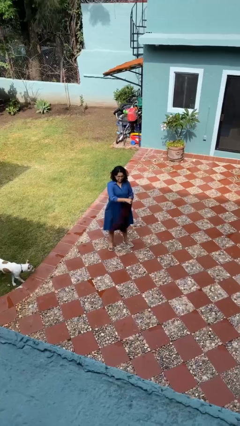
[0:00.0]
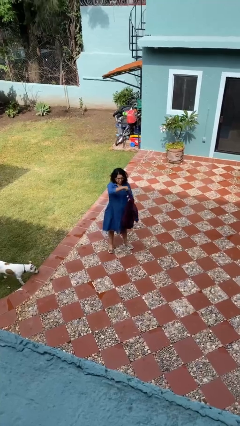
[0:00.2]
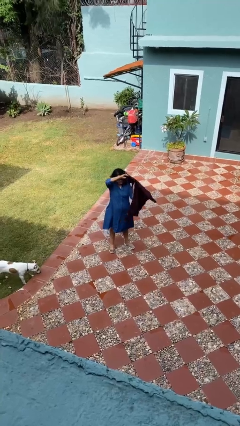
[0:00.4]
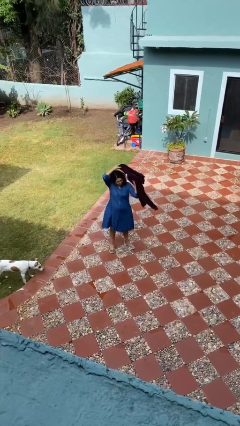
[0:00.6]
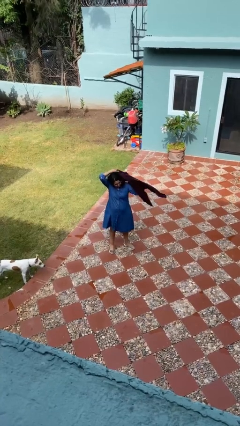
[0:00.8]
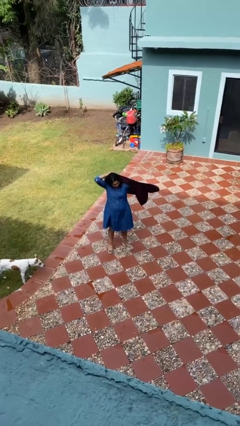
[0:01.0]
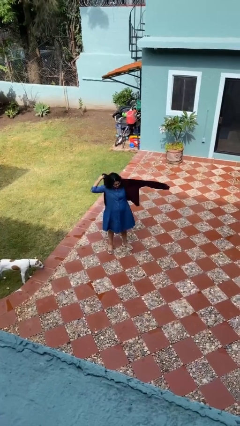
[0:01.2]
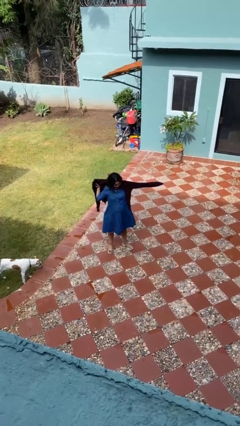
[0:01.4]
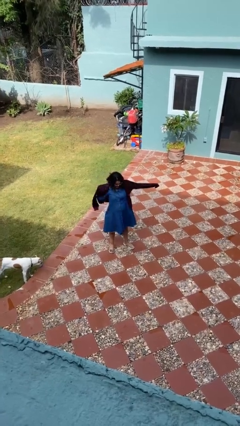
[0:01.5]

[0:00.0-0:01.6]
person puts on jacket

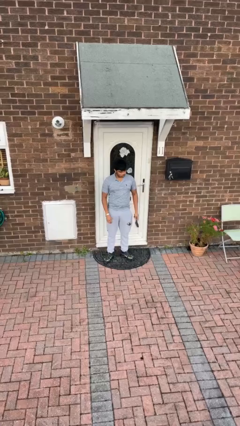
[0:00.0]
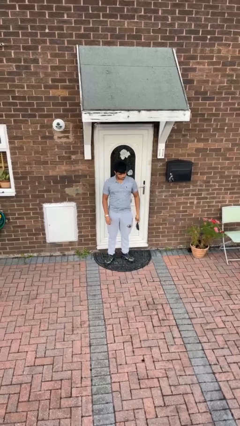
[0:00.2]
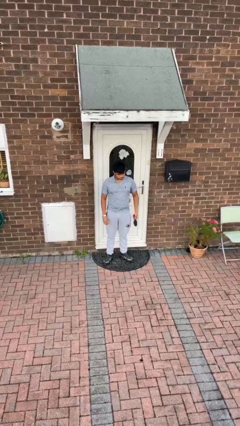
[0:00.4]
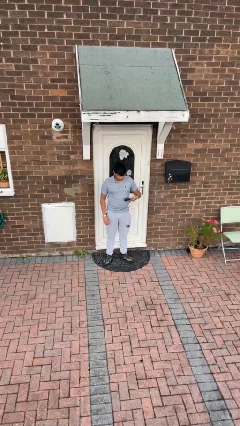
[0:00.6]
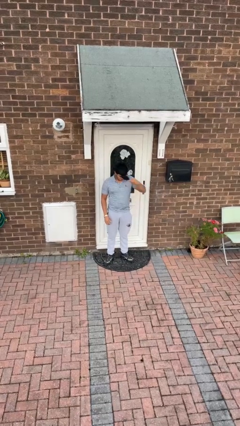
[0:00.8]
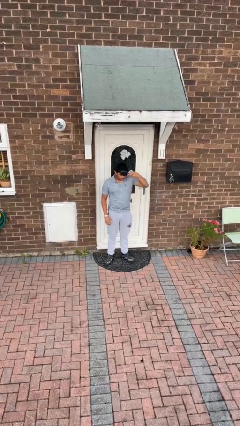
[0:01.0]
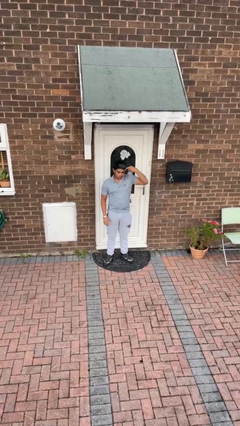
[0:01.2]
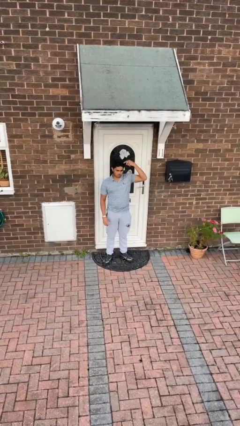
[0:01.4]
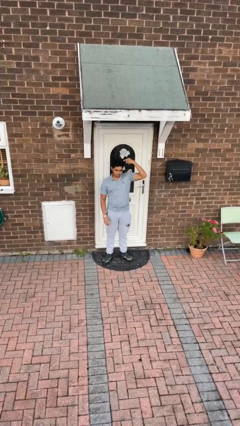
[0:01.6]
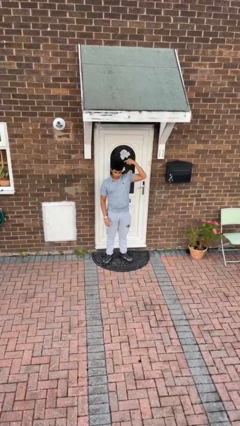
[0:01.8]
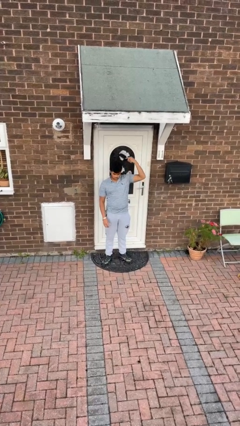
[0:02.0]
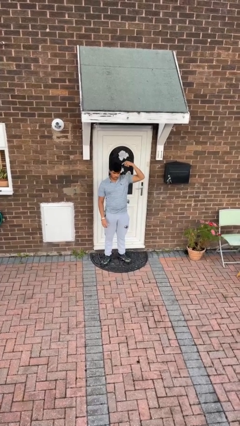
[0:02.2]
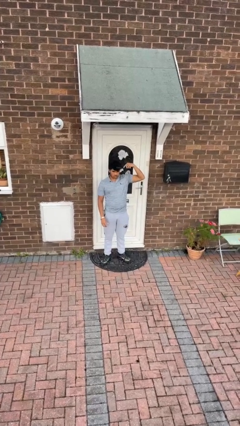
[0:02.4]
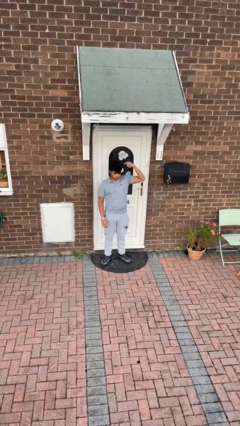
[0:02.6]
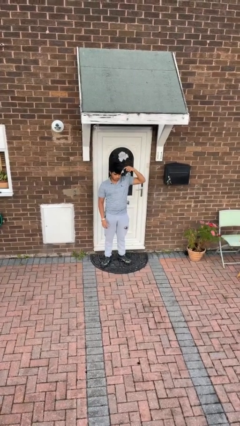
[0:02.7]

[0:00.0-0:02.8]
person brushes hair

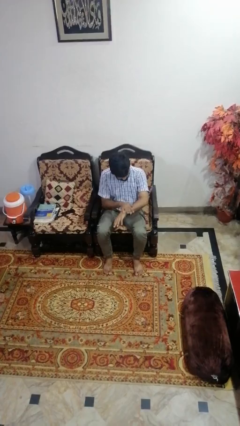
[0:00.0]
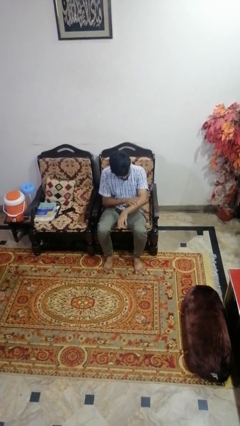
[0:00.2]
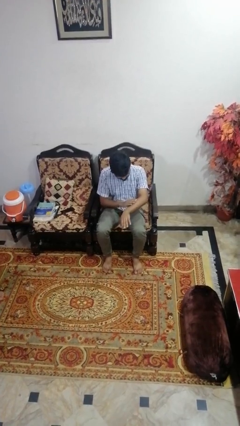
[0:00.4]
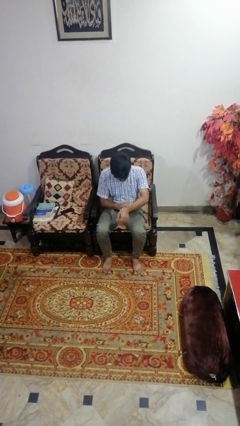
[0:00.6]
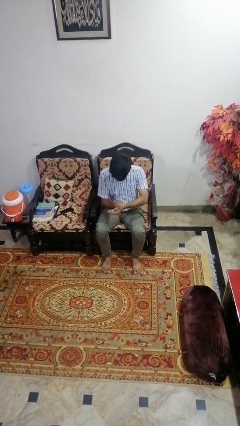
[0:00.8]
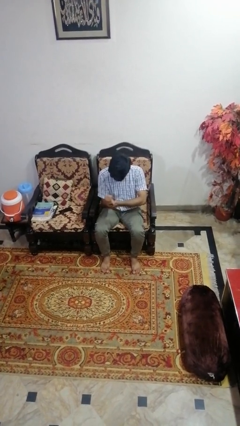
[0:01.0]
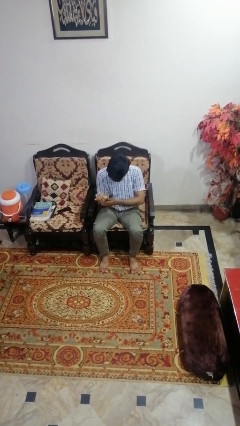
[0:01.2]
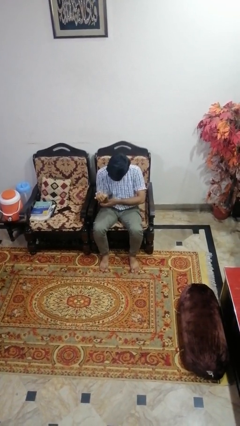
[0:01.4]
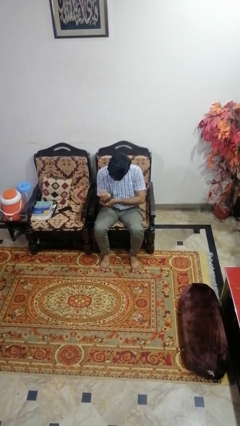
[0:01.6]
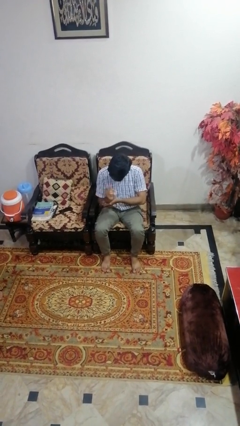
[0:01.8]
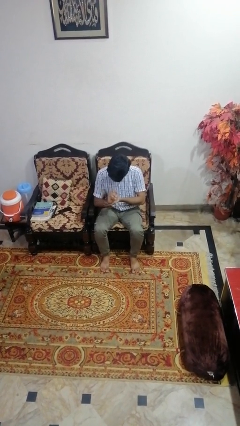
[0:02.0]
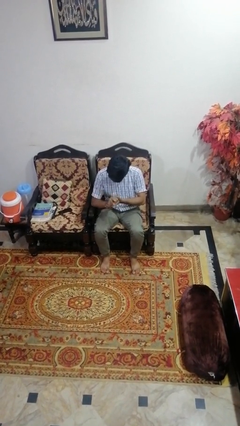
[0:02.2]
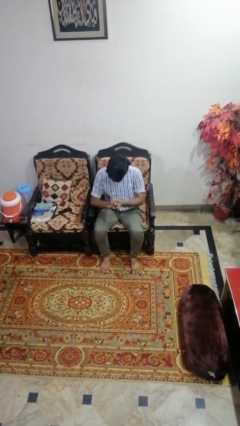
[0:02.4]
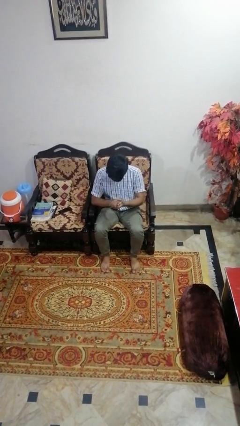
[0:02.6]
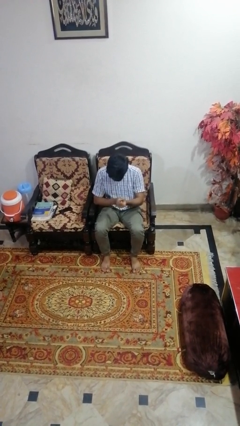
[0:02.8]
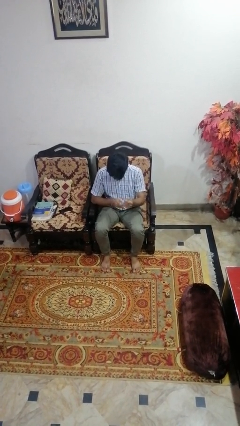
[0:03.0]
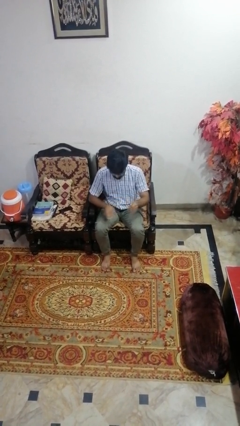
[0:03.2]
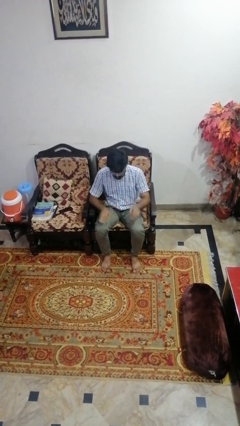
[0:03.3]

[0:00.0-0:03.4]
person looks at hands in lap

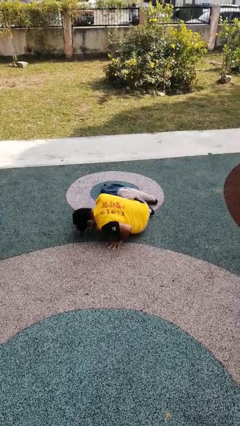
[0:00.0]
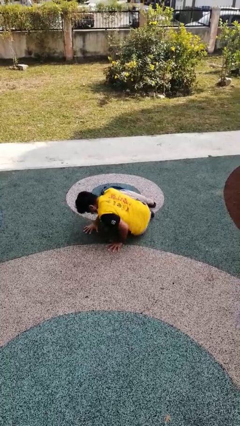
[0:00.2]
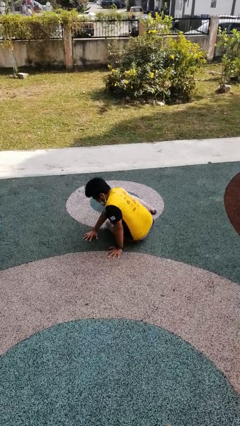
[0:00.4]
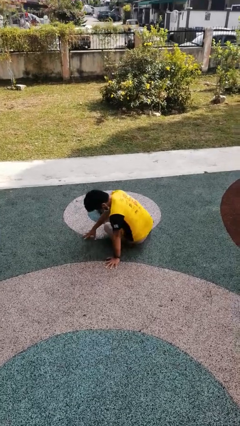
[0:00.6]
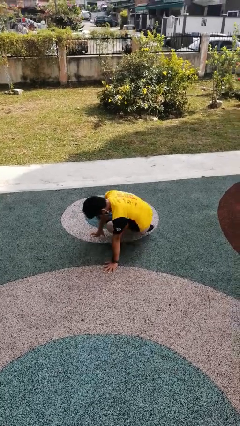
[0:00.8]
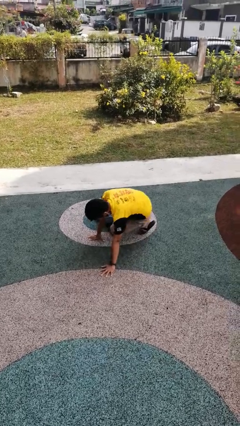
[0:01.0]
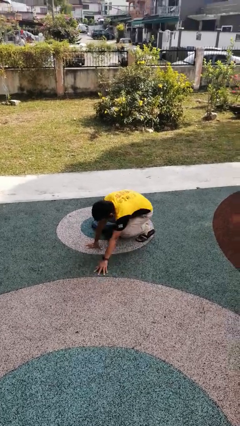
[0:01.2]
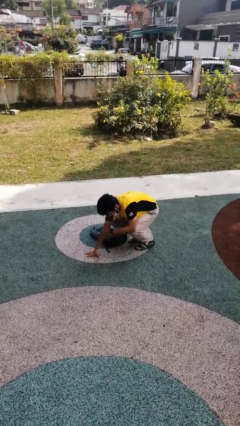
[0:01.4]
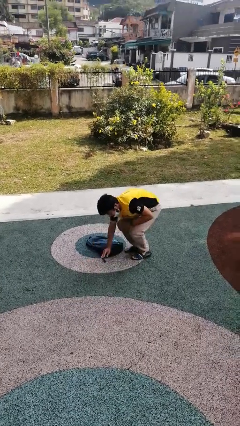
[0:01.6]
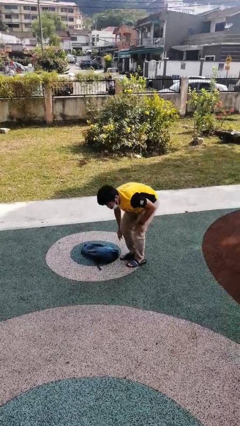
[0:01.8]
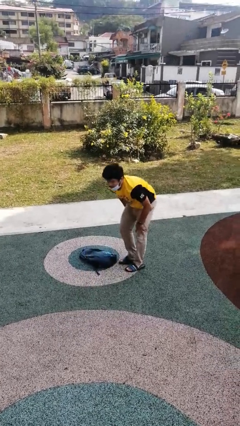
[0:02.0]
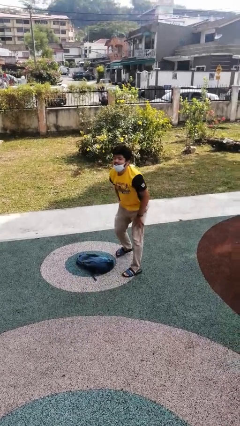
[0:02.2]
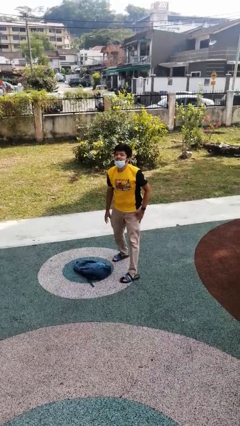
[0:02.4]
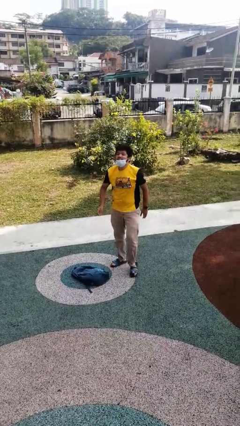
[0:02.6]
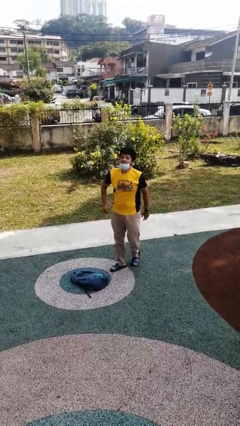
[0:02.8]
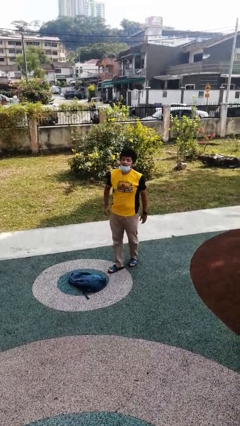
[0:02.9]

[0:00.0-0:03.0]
person stands up from floor

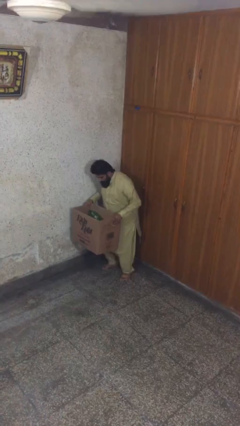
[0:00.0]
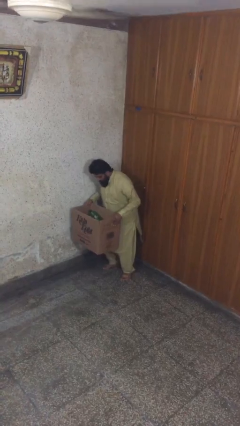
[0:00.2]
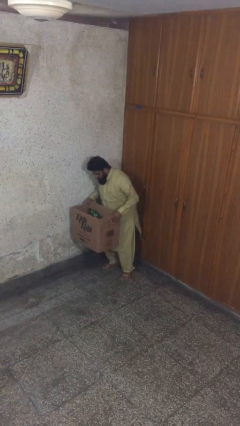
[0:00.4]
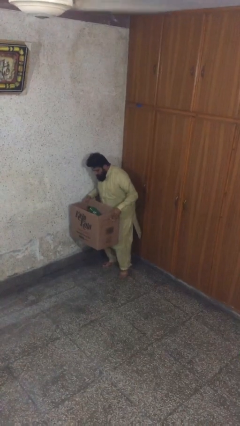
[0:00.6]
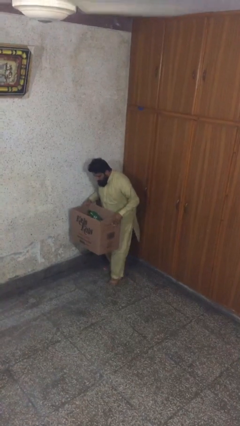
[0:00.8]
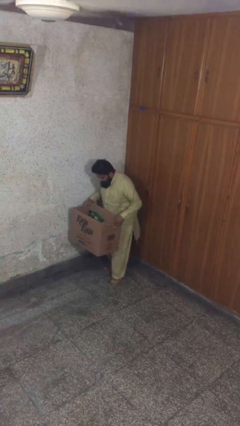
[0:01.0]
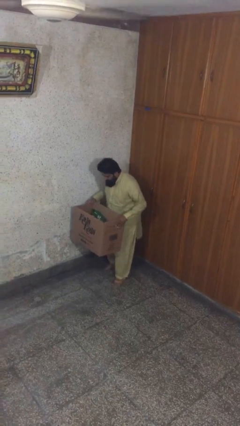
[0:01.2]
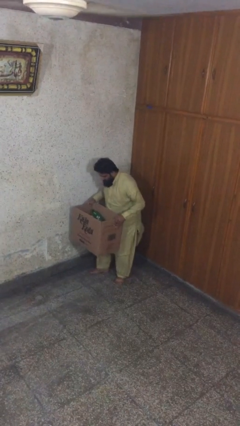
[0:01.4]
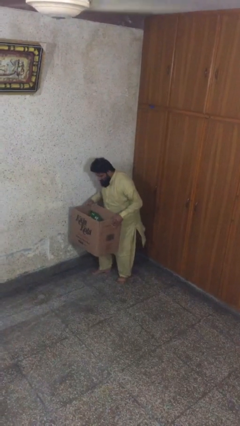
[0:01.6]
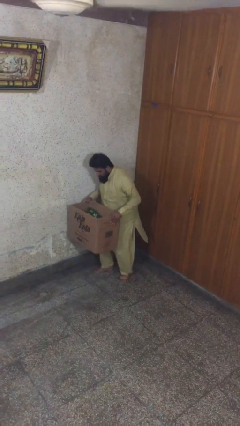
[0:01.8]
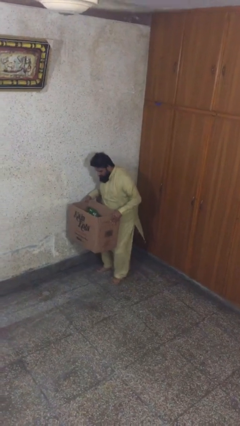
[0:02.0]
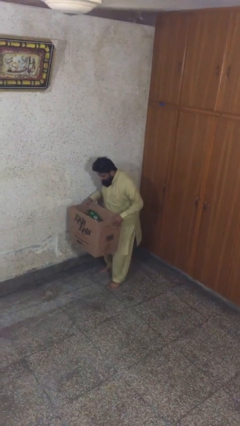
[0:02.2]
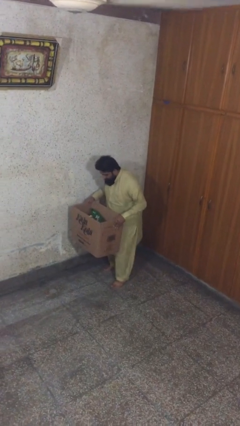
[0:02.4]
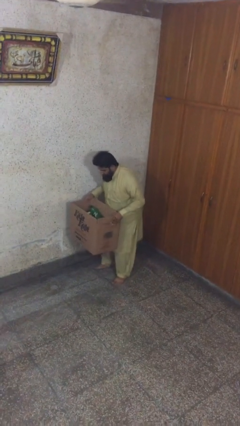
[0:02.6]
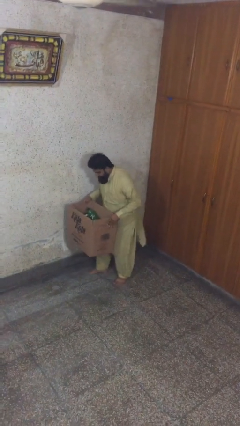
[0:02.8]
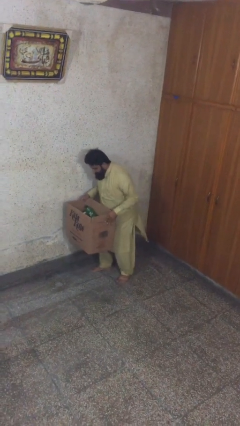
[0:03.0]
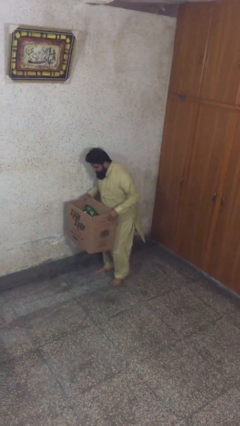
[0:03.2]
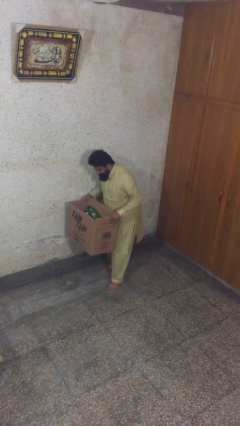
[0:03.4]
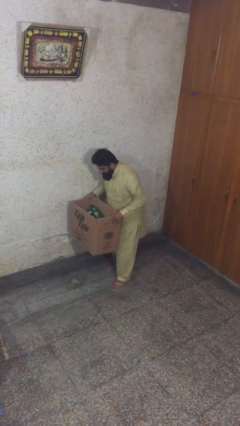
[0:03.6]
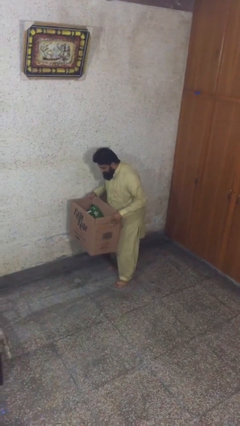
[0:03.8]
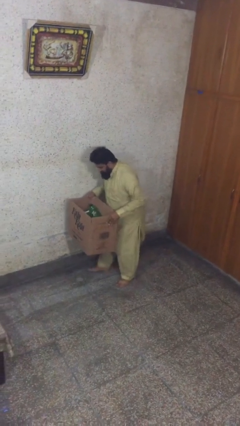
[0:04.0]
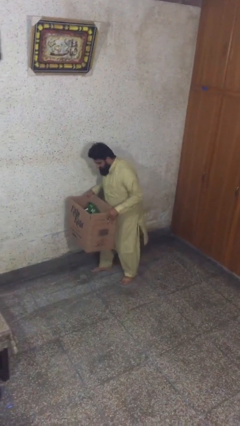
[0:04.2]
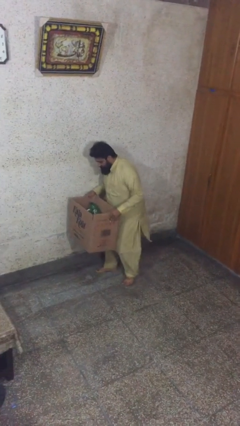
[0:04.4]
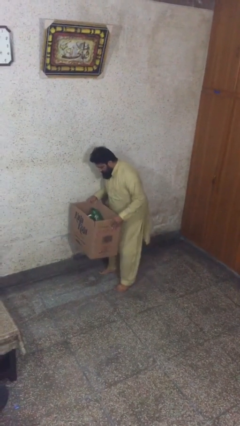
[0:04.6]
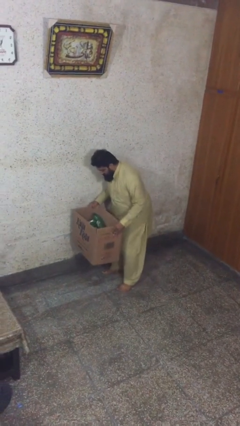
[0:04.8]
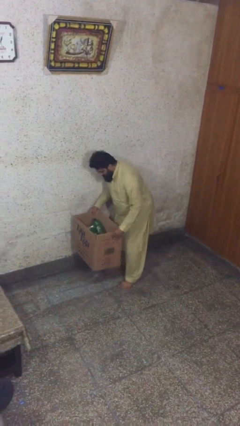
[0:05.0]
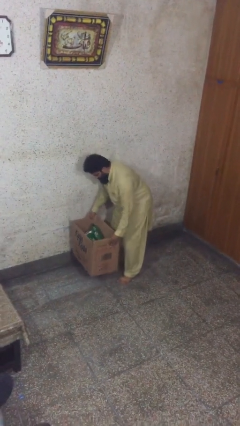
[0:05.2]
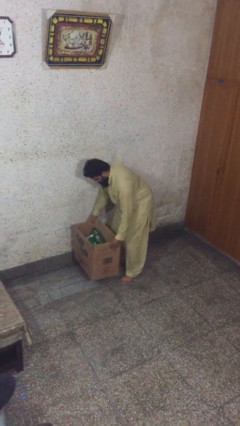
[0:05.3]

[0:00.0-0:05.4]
person carries heavy object

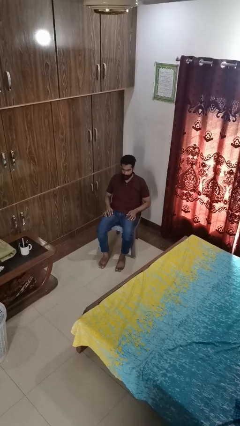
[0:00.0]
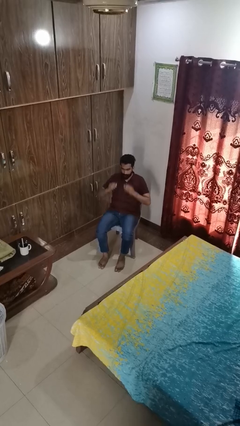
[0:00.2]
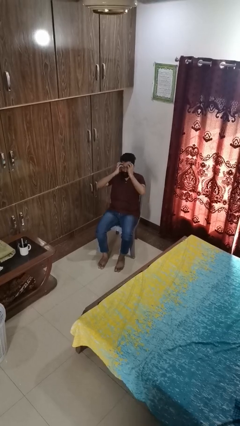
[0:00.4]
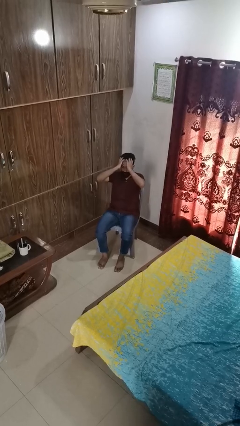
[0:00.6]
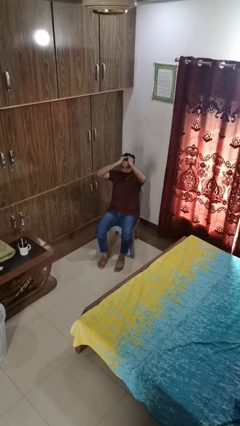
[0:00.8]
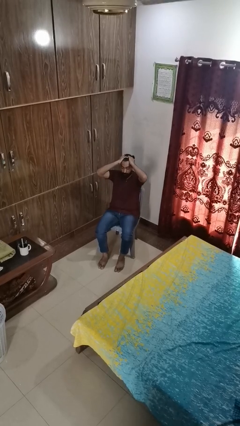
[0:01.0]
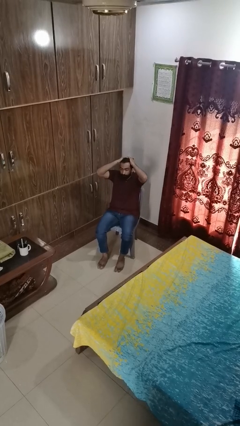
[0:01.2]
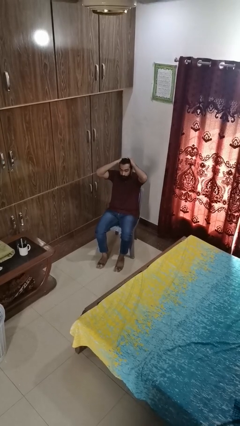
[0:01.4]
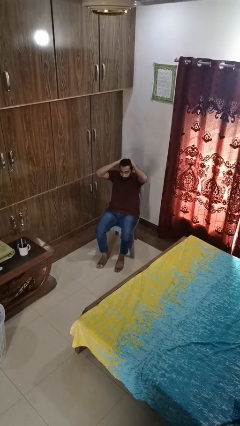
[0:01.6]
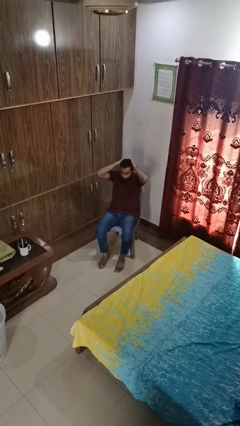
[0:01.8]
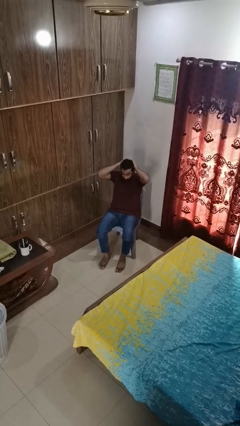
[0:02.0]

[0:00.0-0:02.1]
person strokes hair
